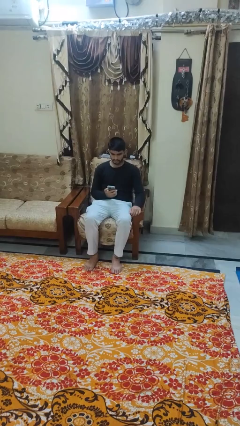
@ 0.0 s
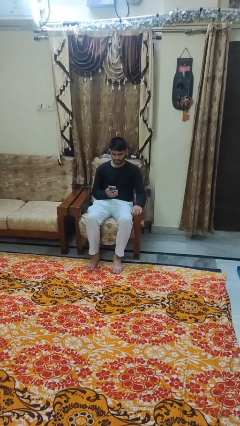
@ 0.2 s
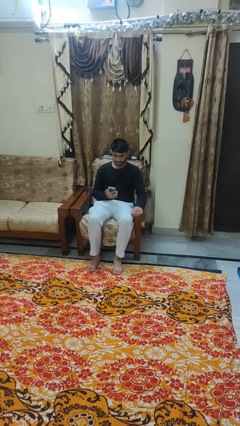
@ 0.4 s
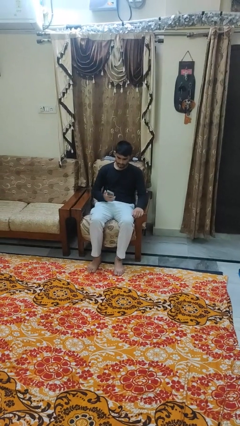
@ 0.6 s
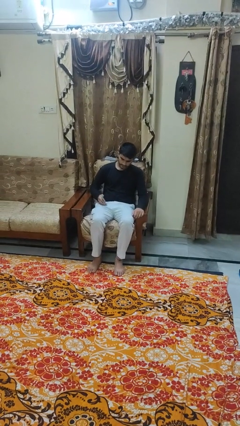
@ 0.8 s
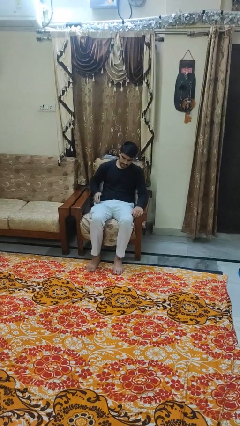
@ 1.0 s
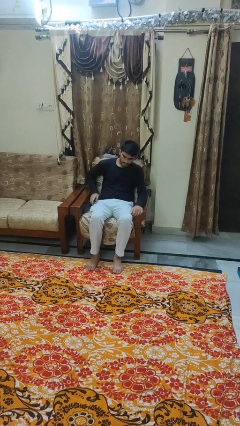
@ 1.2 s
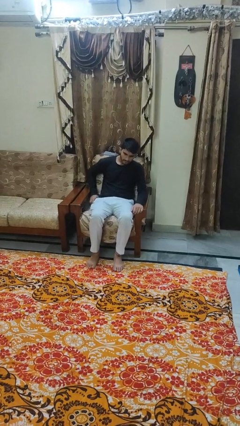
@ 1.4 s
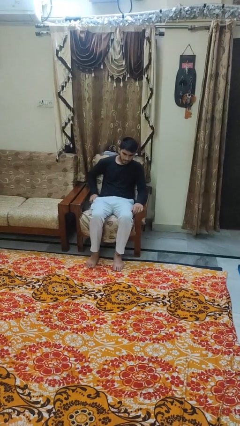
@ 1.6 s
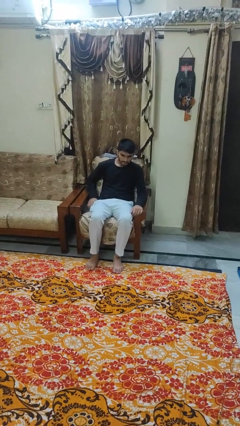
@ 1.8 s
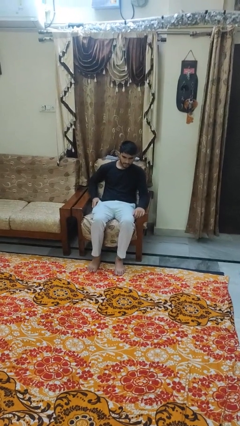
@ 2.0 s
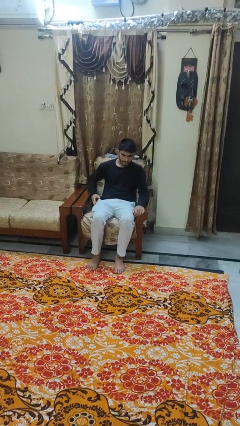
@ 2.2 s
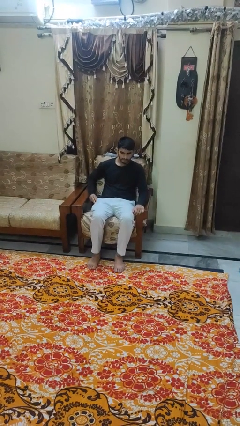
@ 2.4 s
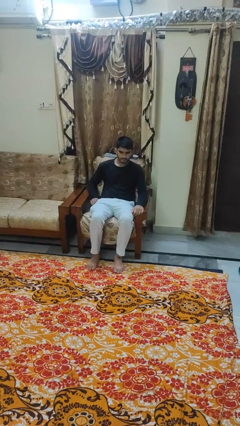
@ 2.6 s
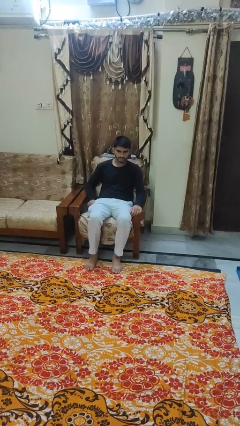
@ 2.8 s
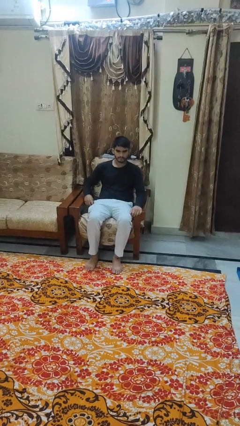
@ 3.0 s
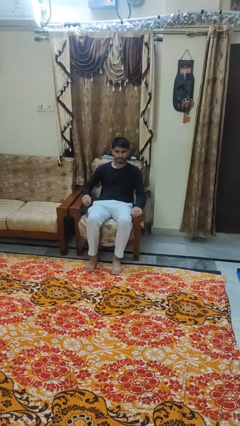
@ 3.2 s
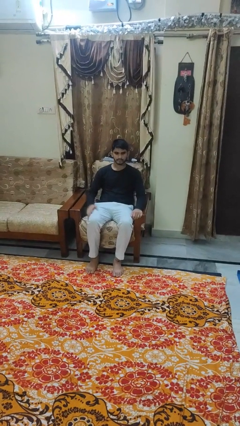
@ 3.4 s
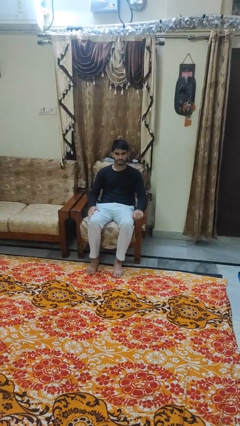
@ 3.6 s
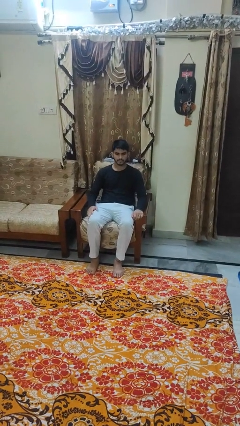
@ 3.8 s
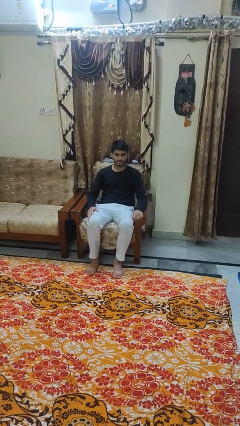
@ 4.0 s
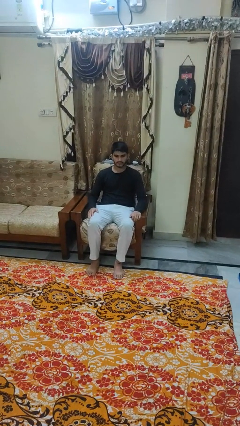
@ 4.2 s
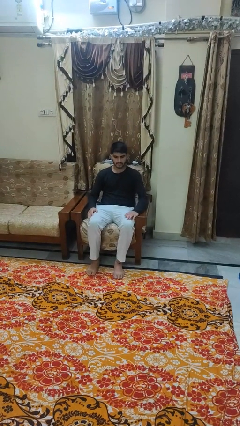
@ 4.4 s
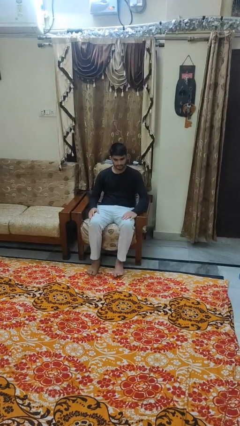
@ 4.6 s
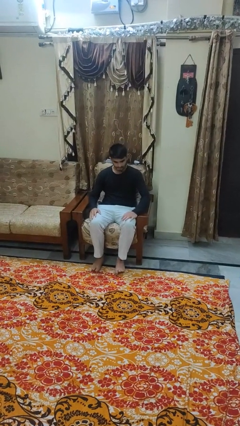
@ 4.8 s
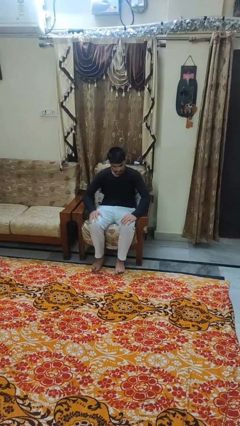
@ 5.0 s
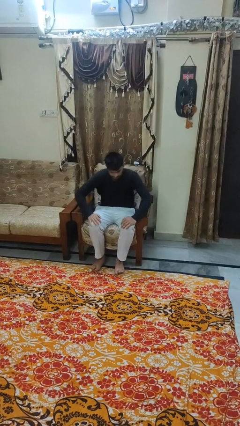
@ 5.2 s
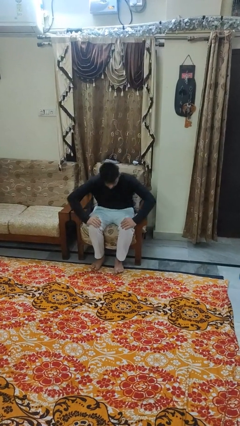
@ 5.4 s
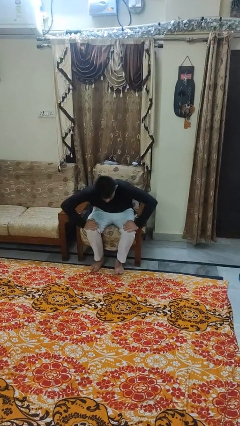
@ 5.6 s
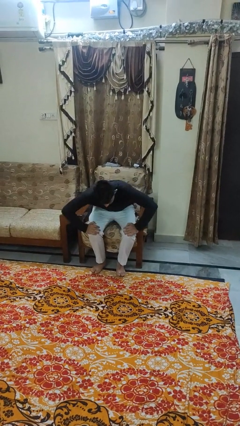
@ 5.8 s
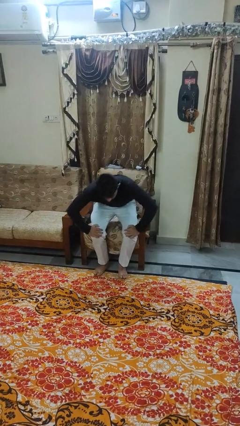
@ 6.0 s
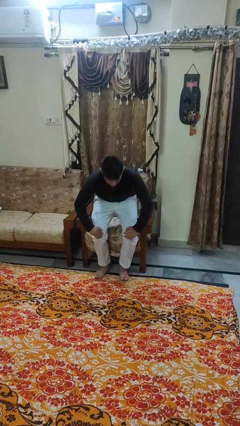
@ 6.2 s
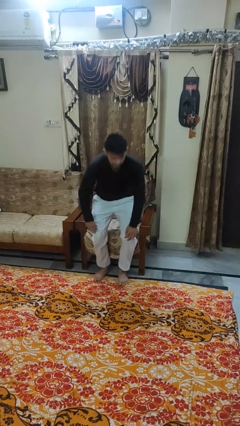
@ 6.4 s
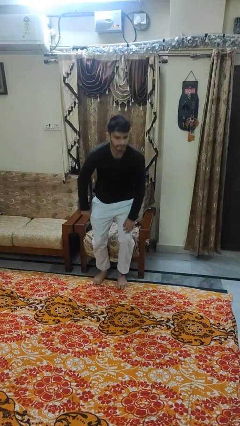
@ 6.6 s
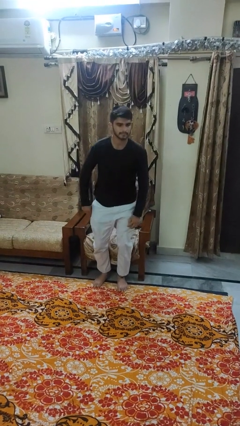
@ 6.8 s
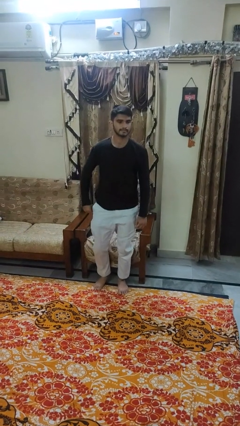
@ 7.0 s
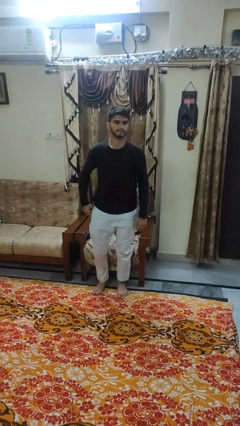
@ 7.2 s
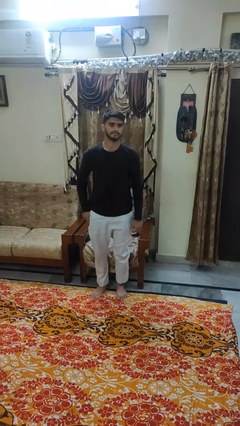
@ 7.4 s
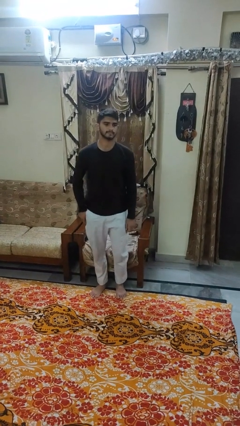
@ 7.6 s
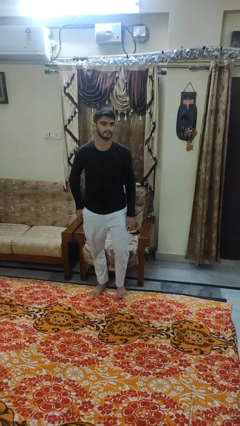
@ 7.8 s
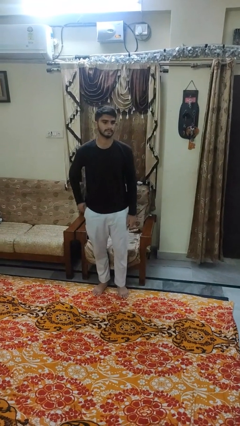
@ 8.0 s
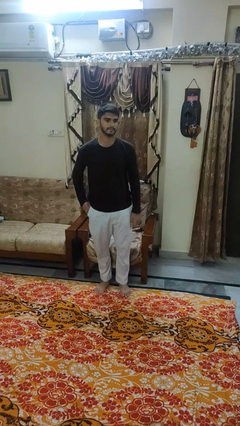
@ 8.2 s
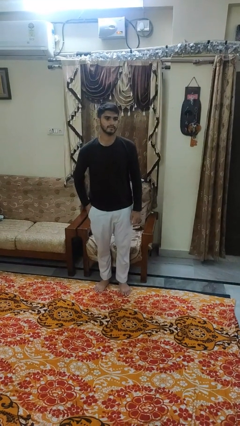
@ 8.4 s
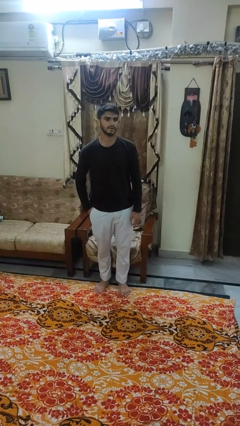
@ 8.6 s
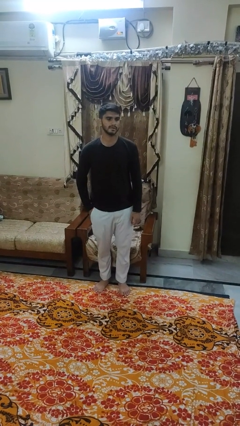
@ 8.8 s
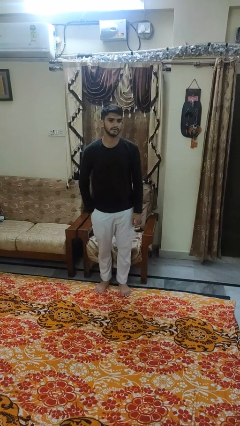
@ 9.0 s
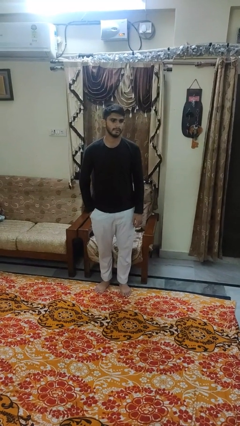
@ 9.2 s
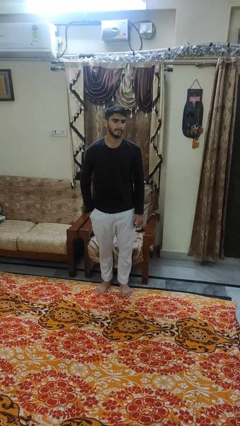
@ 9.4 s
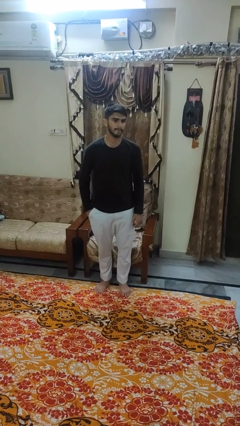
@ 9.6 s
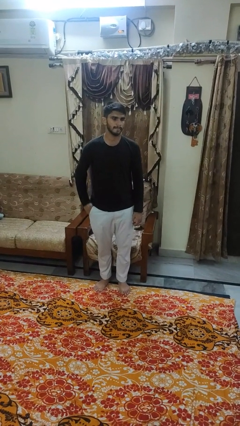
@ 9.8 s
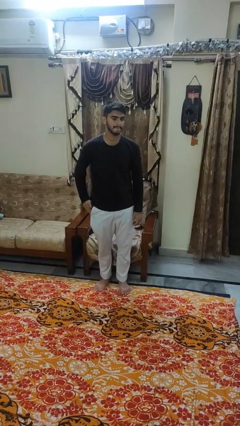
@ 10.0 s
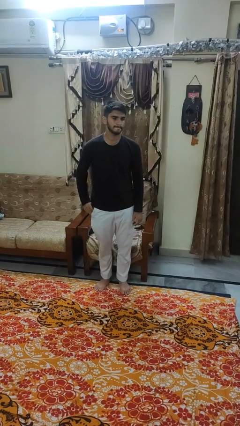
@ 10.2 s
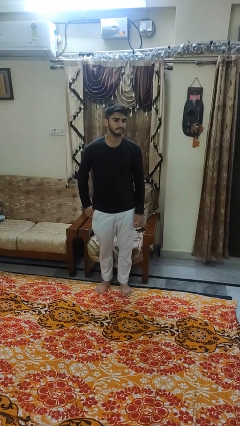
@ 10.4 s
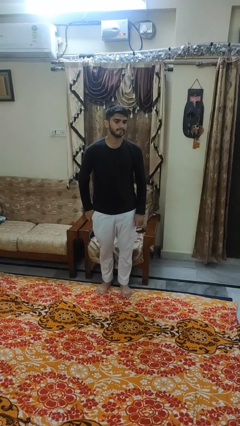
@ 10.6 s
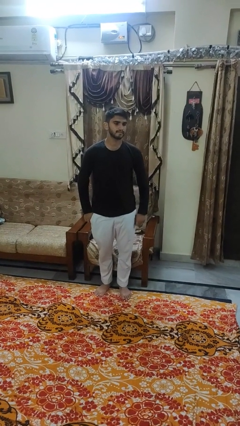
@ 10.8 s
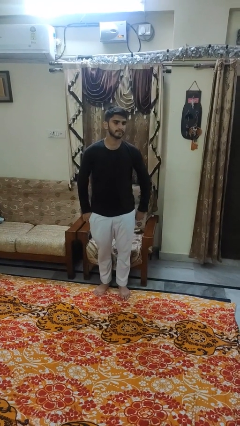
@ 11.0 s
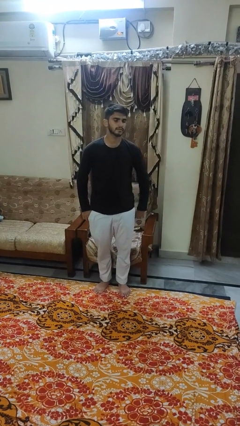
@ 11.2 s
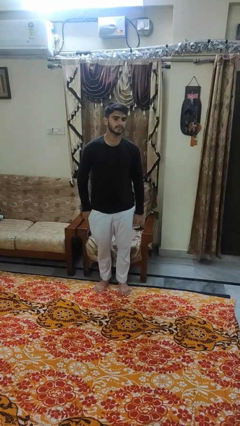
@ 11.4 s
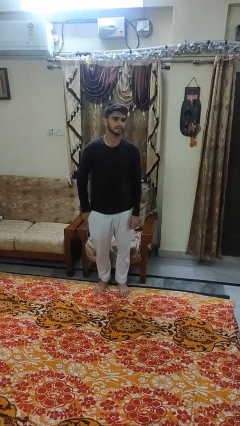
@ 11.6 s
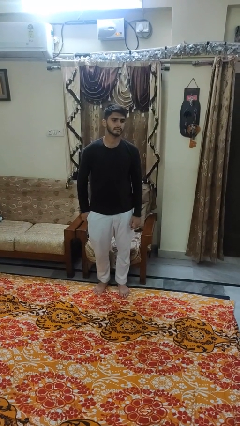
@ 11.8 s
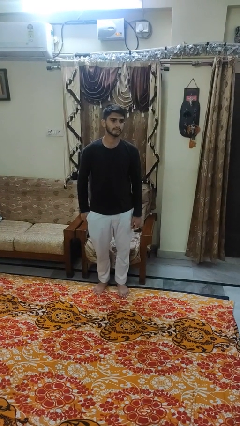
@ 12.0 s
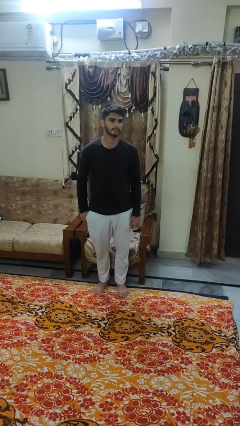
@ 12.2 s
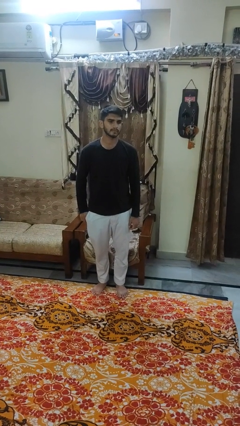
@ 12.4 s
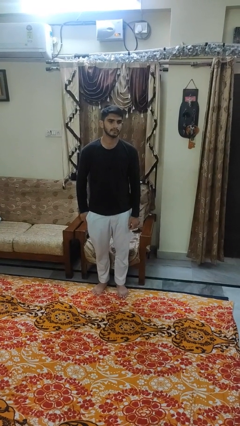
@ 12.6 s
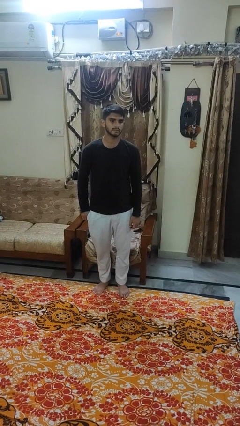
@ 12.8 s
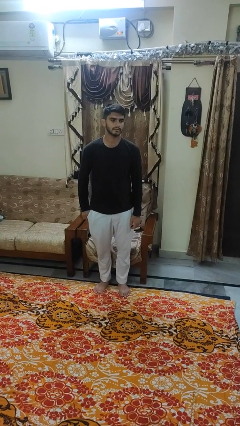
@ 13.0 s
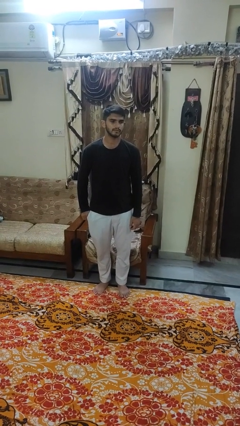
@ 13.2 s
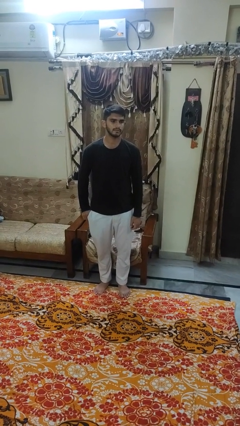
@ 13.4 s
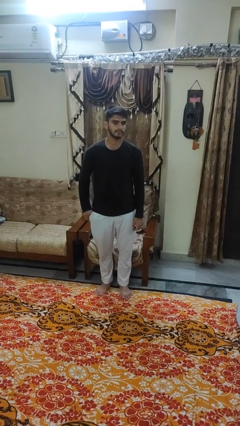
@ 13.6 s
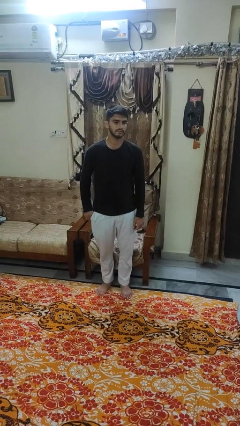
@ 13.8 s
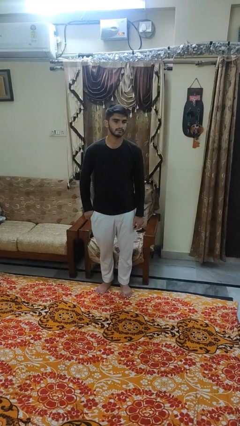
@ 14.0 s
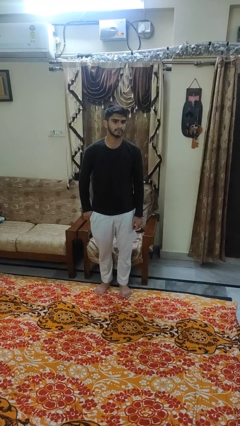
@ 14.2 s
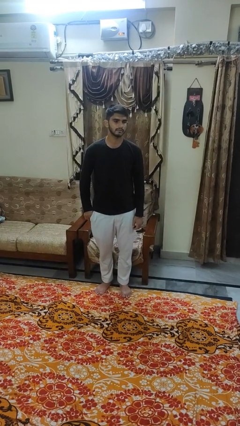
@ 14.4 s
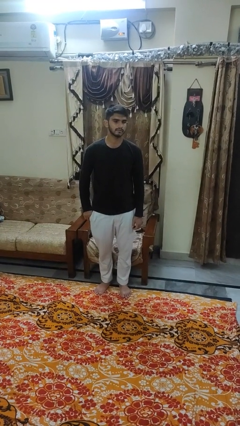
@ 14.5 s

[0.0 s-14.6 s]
person puts phone into pocket

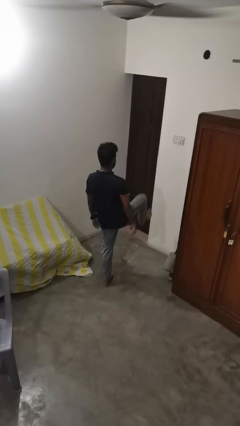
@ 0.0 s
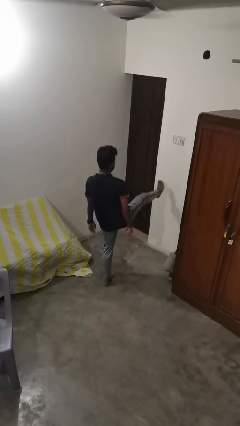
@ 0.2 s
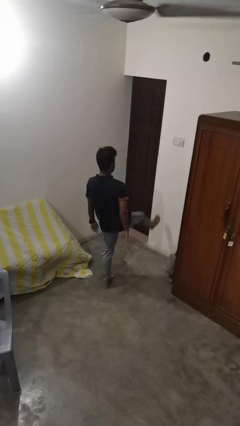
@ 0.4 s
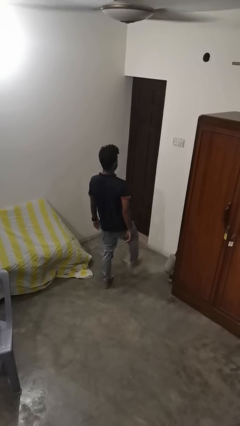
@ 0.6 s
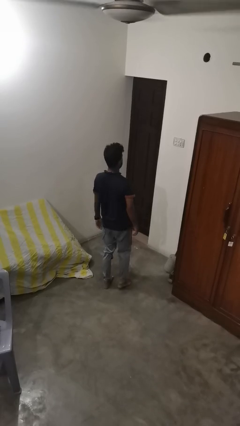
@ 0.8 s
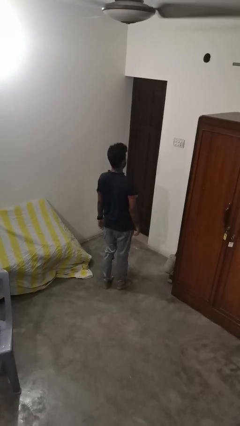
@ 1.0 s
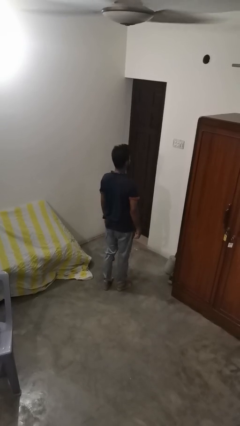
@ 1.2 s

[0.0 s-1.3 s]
person karate kicks

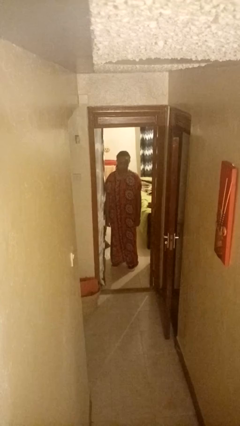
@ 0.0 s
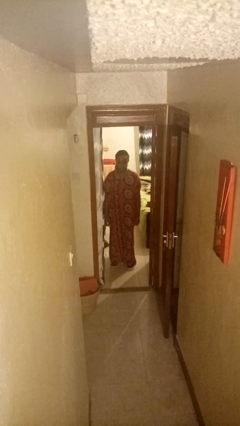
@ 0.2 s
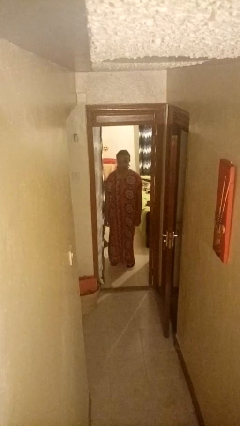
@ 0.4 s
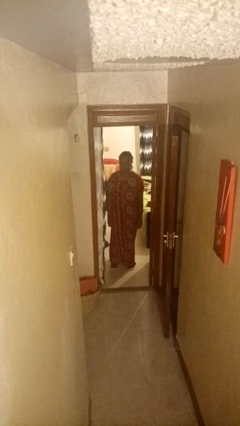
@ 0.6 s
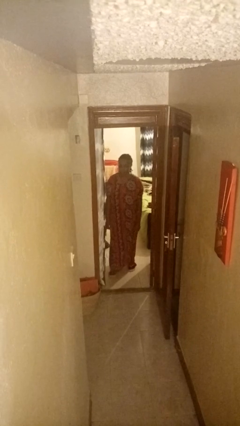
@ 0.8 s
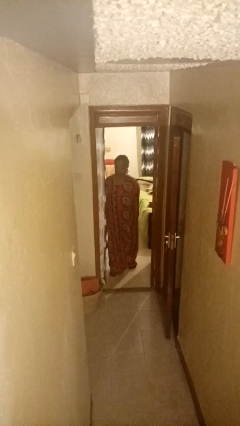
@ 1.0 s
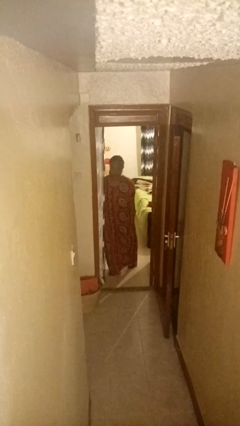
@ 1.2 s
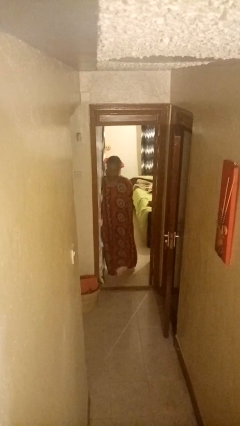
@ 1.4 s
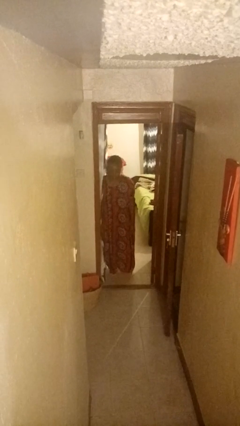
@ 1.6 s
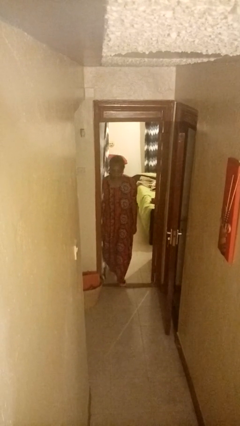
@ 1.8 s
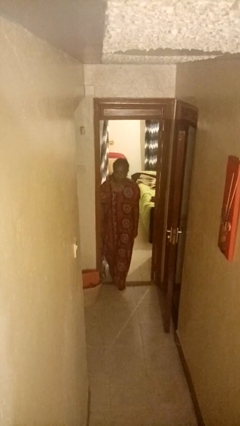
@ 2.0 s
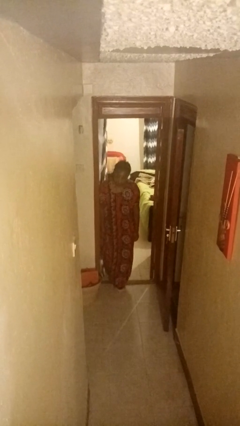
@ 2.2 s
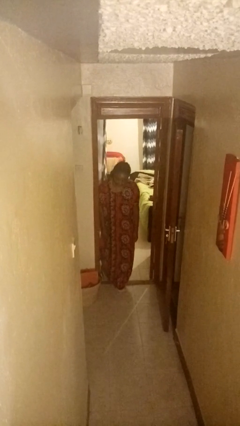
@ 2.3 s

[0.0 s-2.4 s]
person bumps into wall
